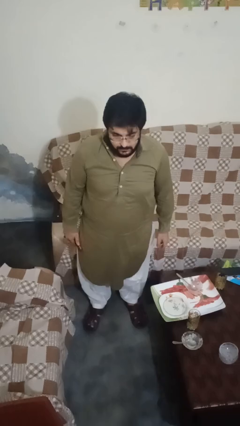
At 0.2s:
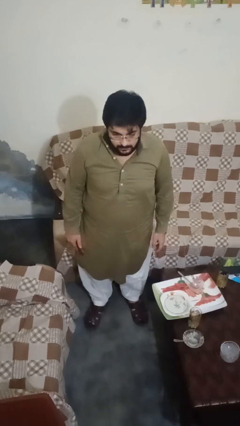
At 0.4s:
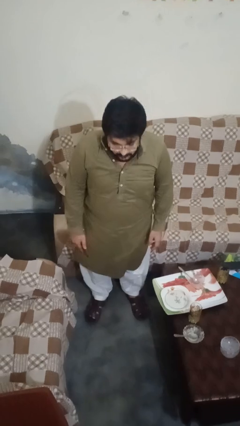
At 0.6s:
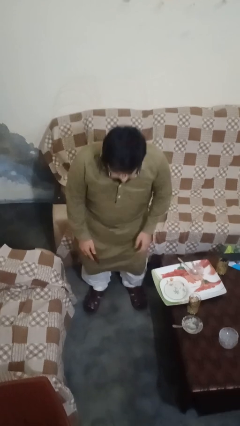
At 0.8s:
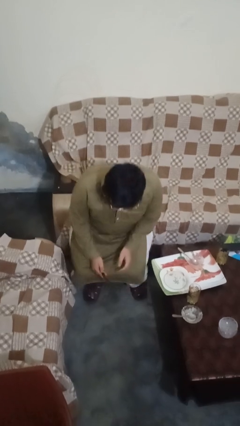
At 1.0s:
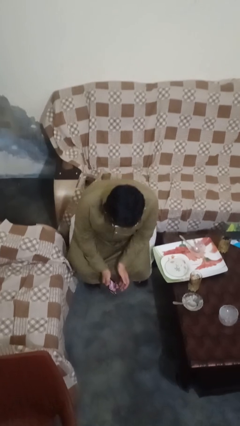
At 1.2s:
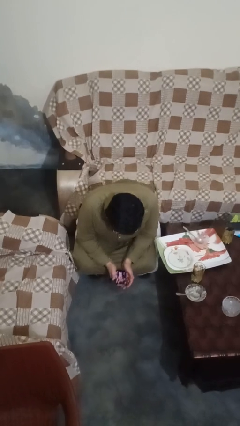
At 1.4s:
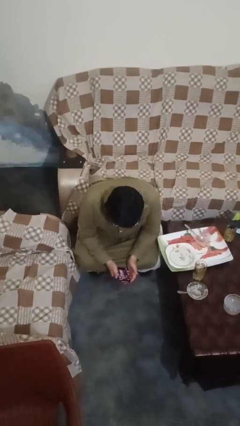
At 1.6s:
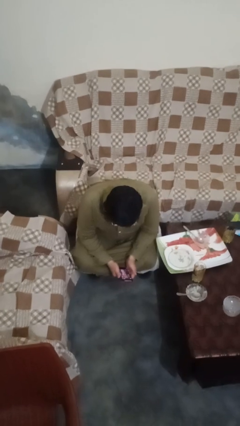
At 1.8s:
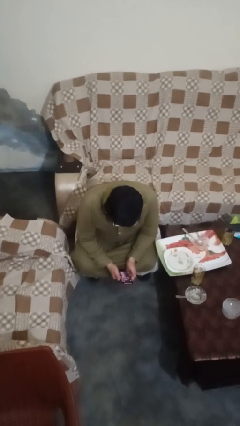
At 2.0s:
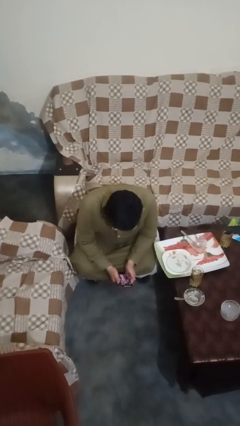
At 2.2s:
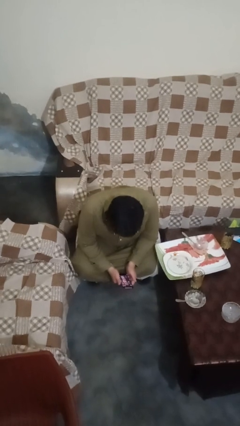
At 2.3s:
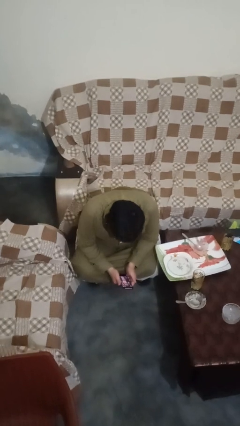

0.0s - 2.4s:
person squats

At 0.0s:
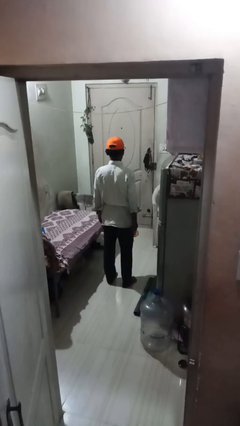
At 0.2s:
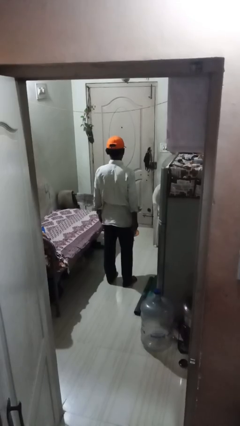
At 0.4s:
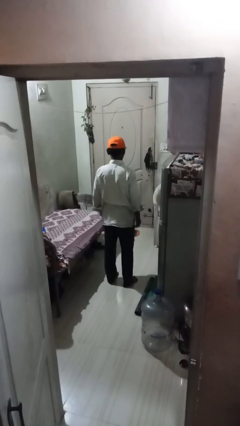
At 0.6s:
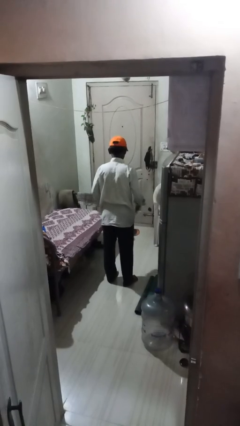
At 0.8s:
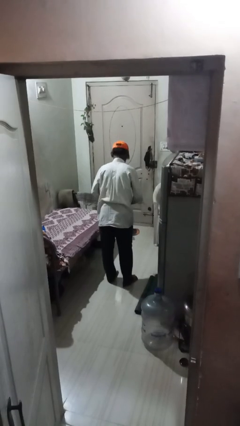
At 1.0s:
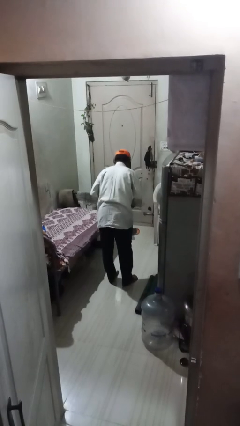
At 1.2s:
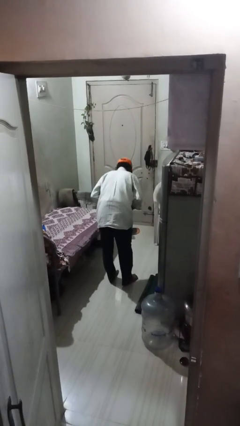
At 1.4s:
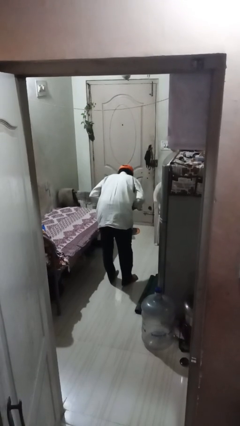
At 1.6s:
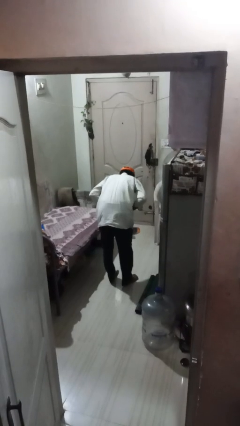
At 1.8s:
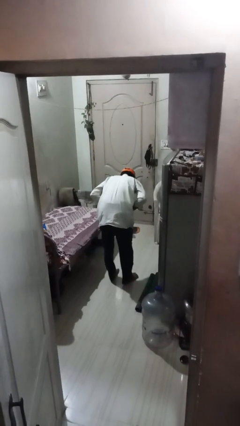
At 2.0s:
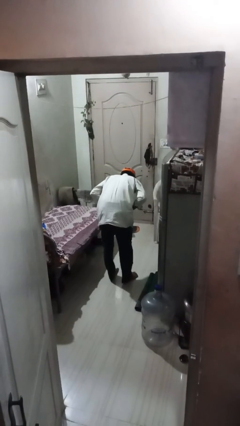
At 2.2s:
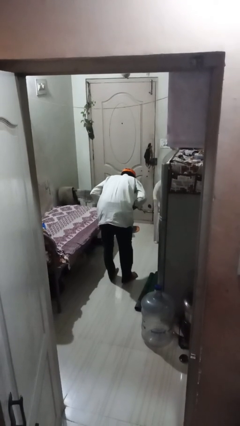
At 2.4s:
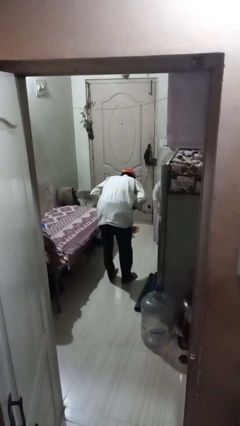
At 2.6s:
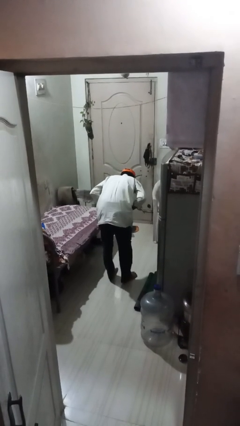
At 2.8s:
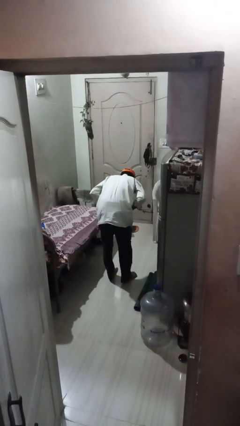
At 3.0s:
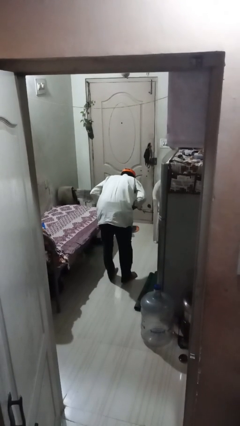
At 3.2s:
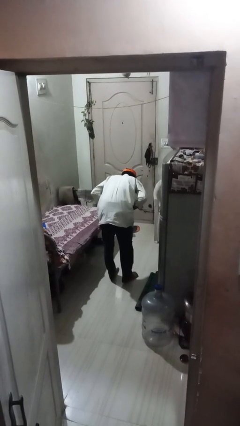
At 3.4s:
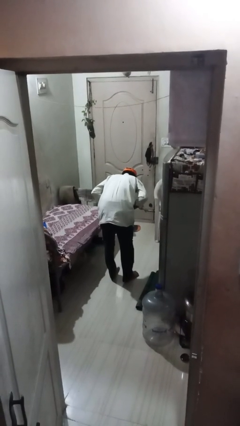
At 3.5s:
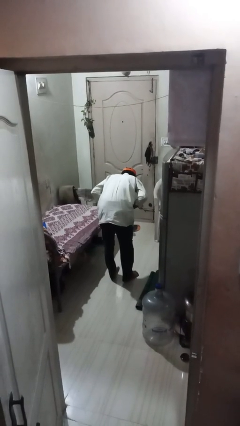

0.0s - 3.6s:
person bows

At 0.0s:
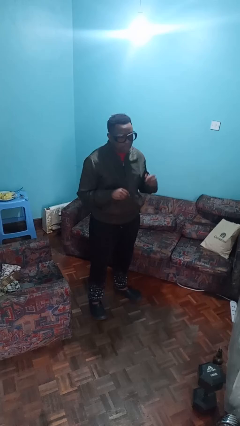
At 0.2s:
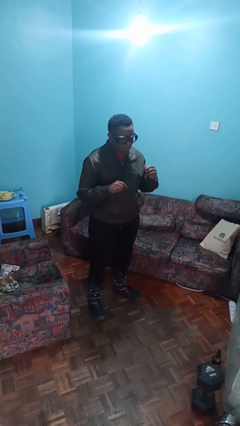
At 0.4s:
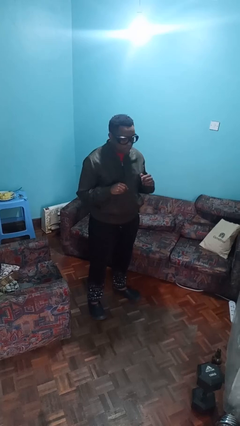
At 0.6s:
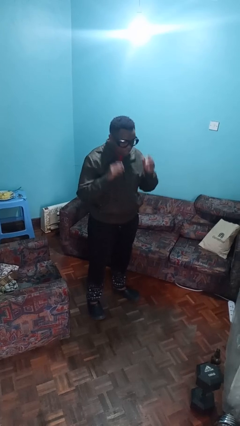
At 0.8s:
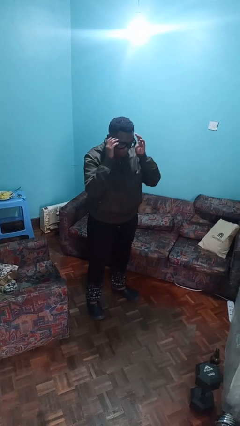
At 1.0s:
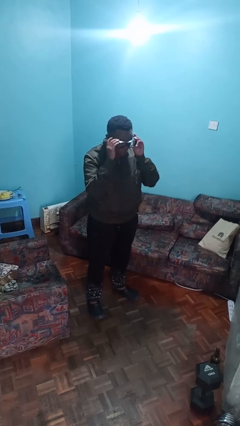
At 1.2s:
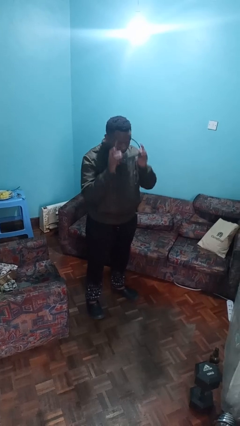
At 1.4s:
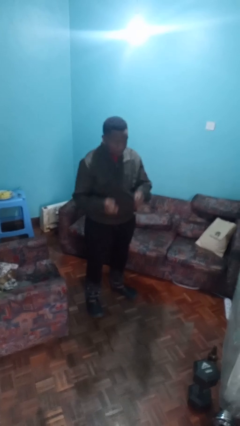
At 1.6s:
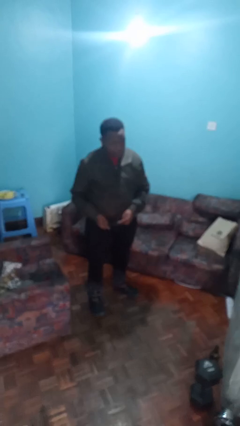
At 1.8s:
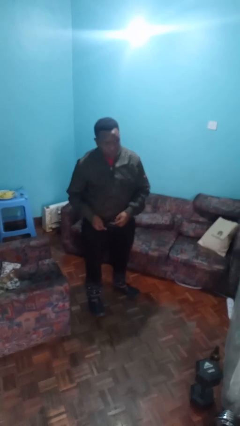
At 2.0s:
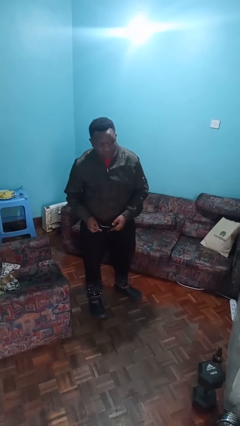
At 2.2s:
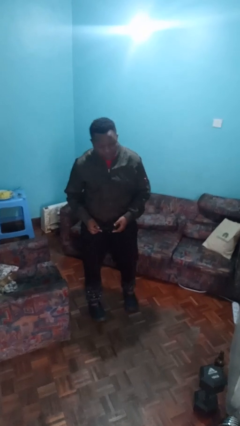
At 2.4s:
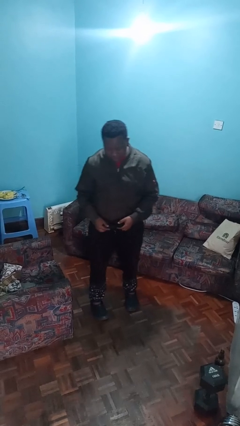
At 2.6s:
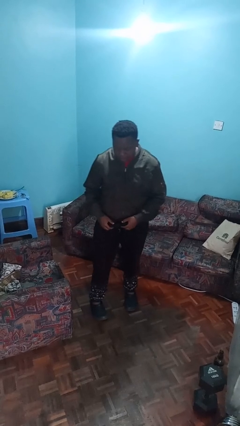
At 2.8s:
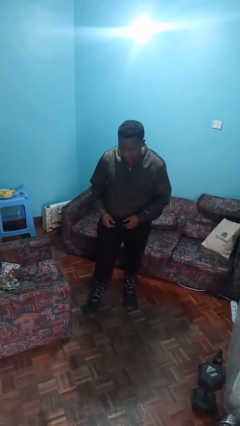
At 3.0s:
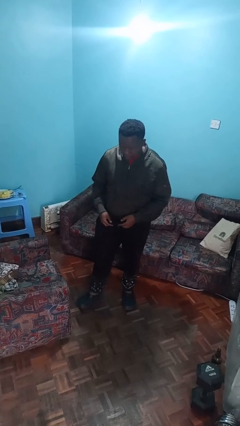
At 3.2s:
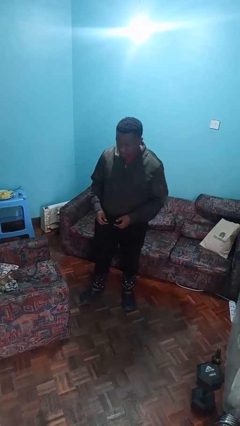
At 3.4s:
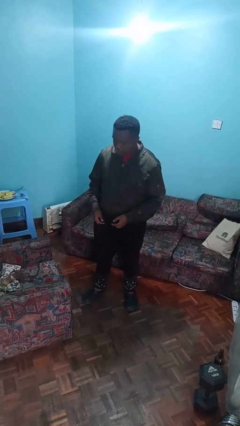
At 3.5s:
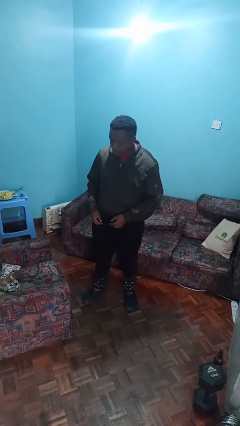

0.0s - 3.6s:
person takes off glasses

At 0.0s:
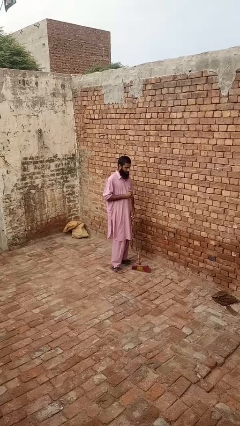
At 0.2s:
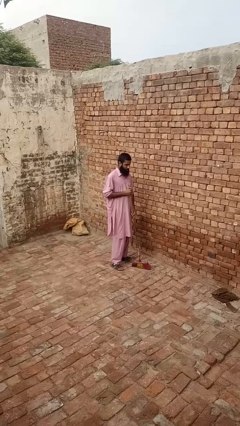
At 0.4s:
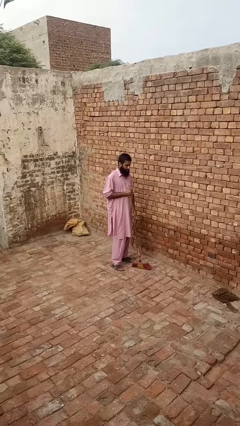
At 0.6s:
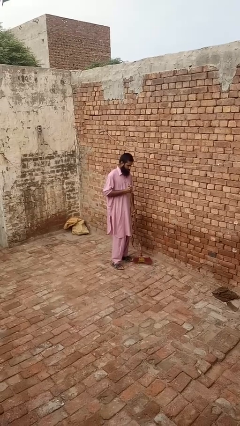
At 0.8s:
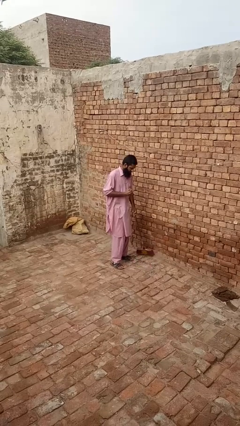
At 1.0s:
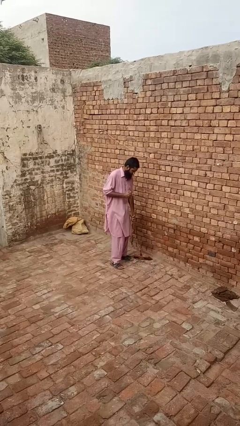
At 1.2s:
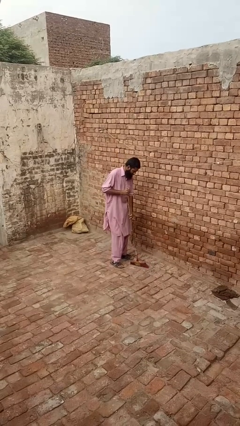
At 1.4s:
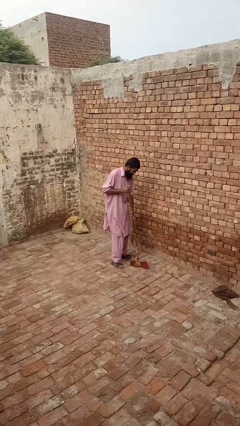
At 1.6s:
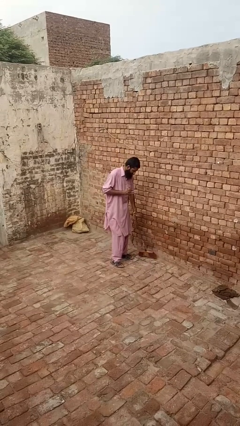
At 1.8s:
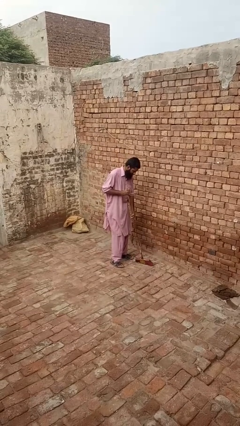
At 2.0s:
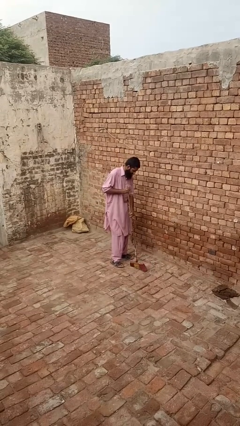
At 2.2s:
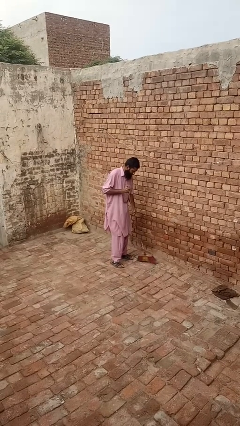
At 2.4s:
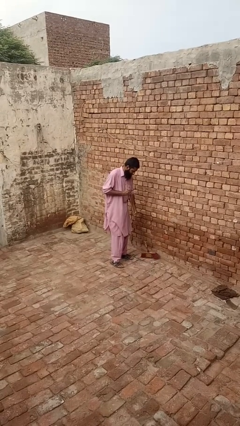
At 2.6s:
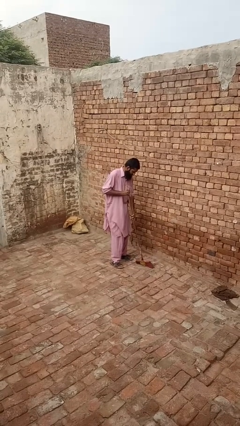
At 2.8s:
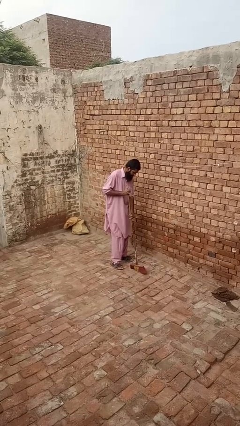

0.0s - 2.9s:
person sweeps floor

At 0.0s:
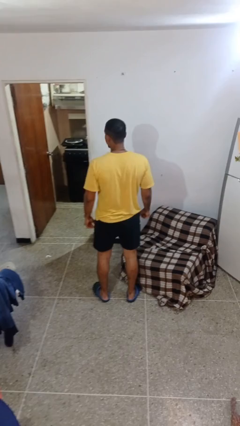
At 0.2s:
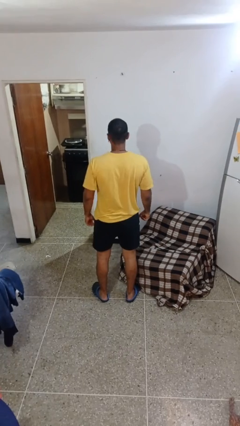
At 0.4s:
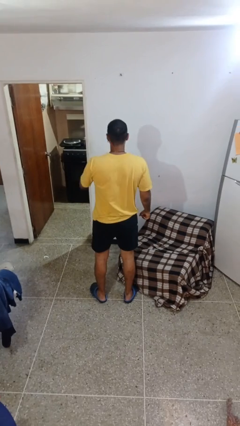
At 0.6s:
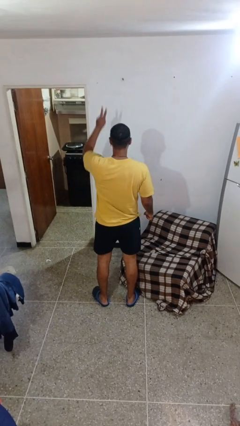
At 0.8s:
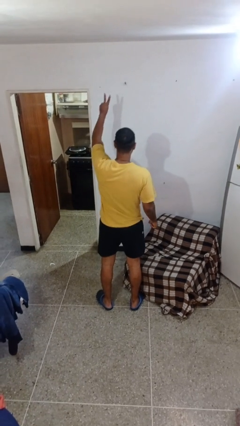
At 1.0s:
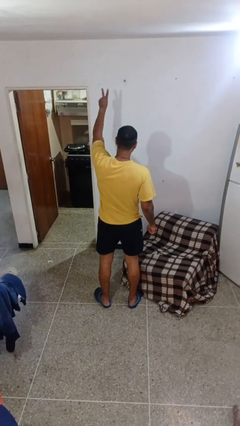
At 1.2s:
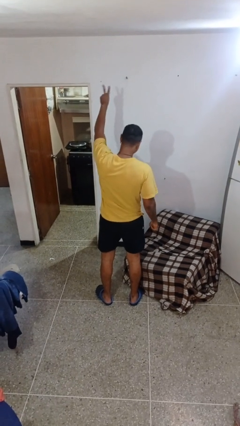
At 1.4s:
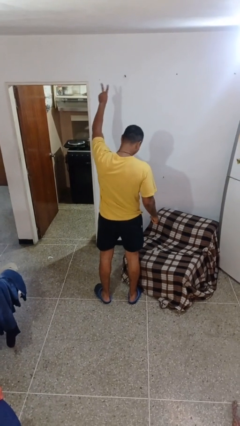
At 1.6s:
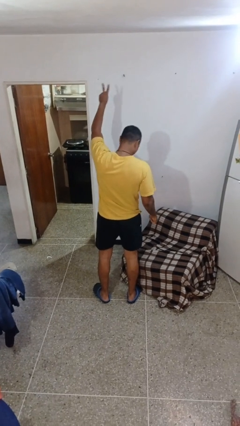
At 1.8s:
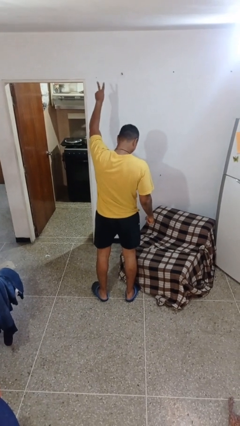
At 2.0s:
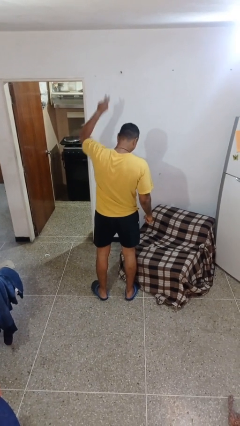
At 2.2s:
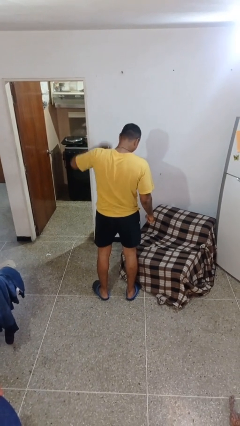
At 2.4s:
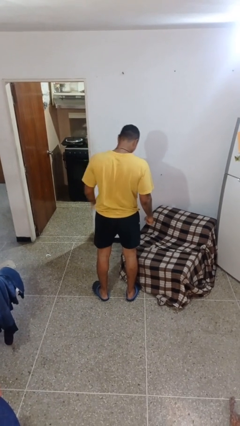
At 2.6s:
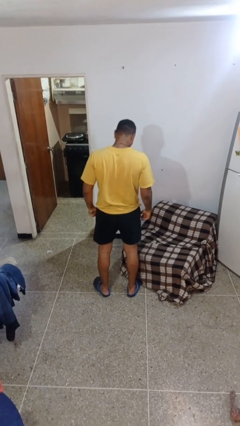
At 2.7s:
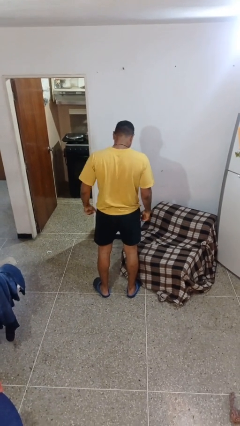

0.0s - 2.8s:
person gestures peace

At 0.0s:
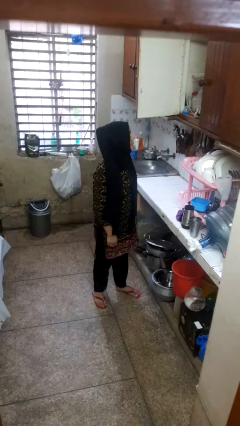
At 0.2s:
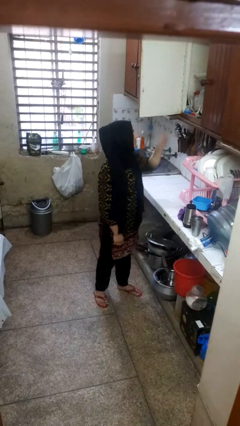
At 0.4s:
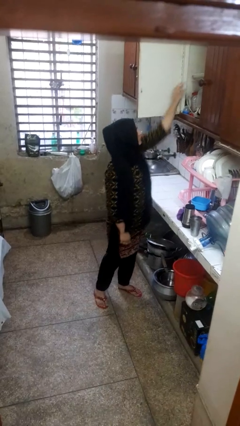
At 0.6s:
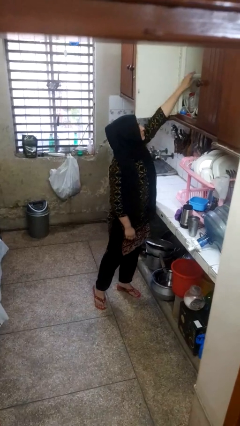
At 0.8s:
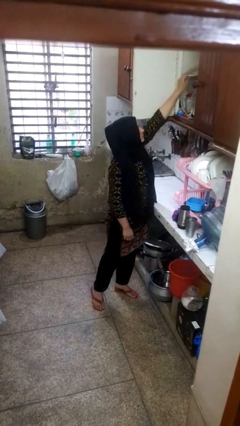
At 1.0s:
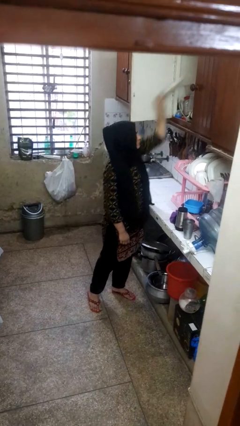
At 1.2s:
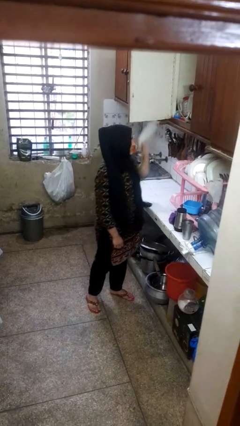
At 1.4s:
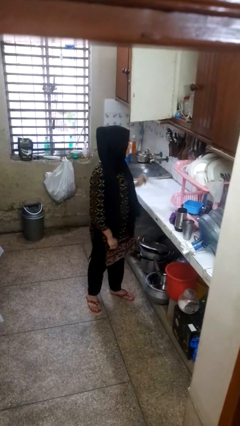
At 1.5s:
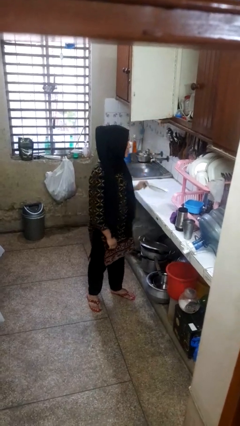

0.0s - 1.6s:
person takes object from cabinet

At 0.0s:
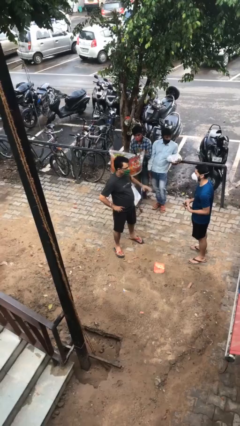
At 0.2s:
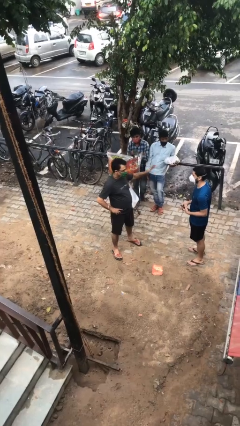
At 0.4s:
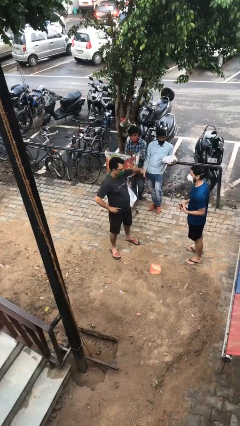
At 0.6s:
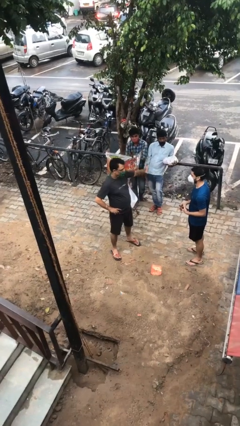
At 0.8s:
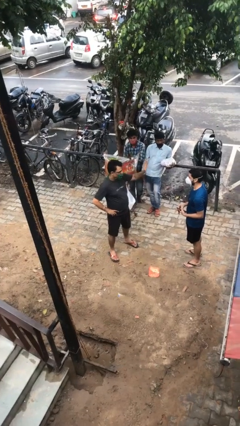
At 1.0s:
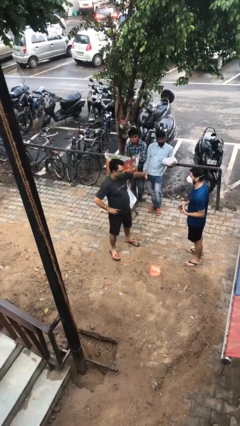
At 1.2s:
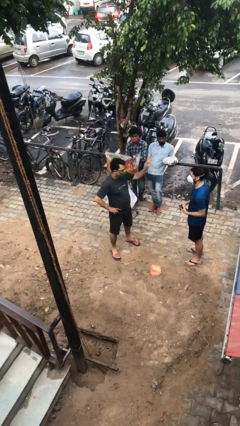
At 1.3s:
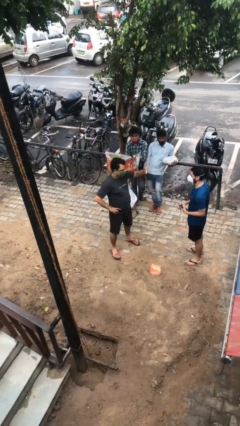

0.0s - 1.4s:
person waves at person
